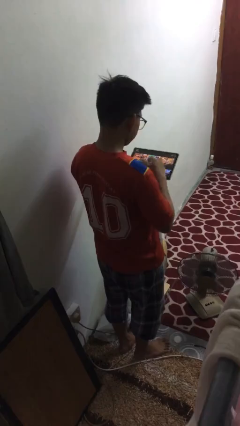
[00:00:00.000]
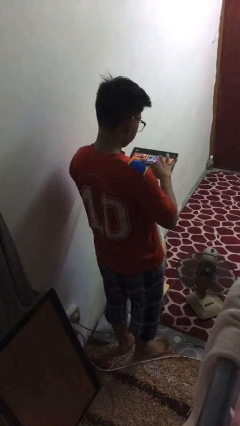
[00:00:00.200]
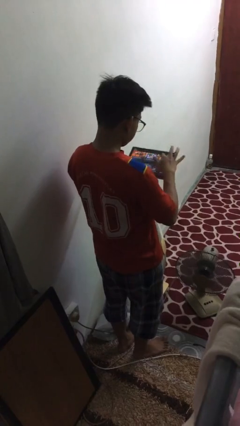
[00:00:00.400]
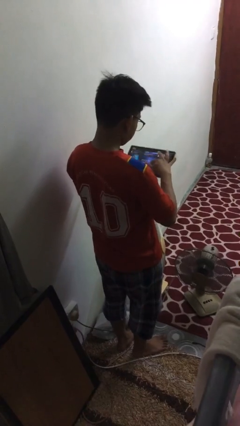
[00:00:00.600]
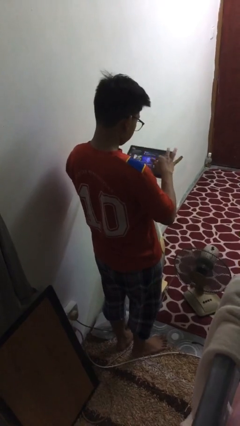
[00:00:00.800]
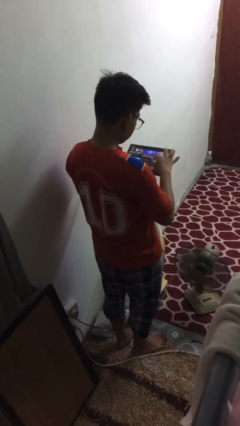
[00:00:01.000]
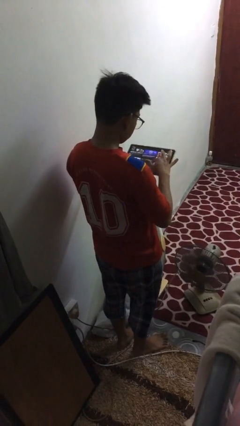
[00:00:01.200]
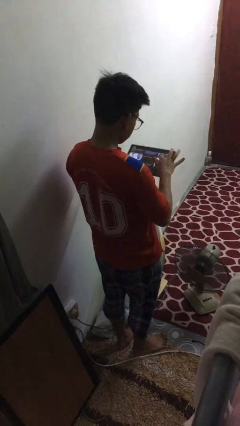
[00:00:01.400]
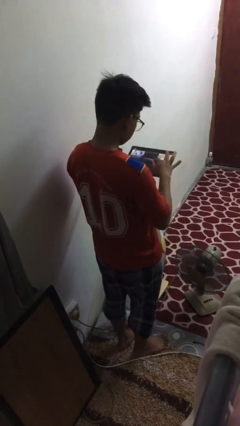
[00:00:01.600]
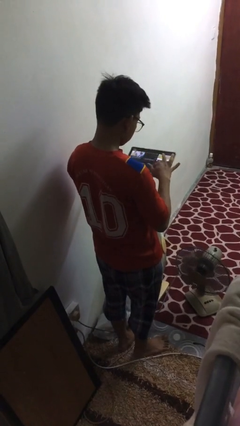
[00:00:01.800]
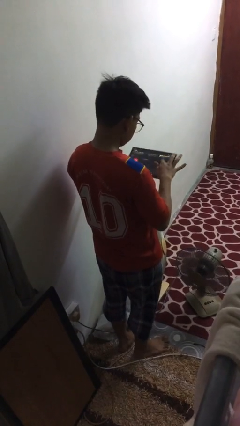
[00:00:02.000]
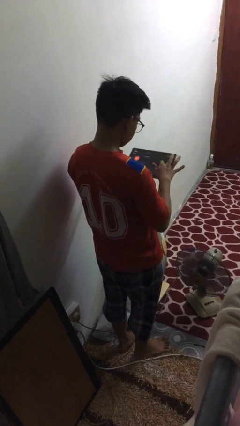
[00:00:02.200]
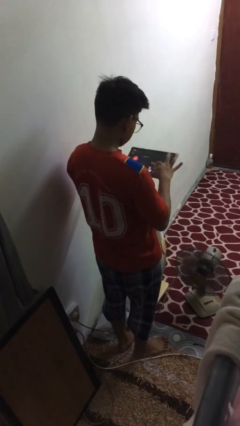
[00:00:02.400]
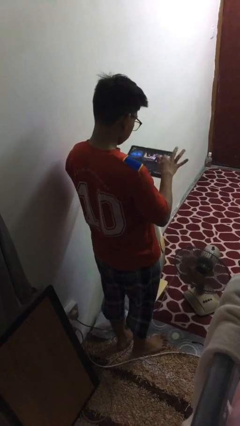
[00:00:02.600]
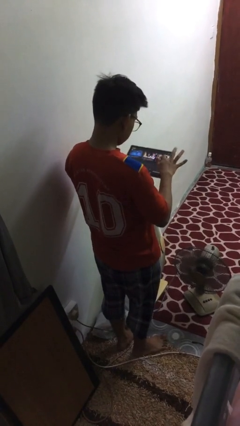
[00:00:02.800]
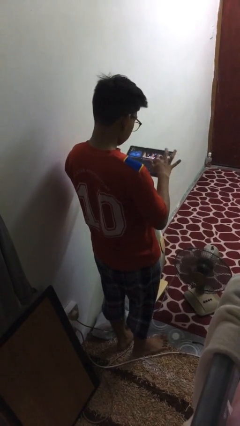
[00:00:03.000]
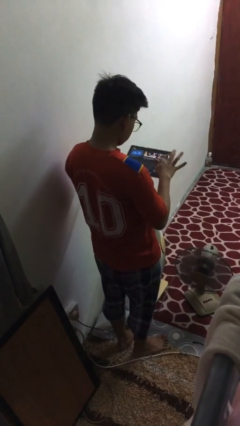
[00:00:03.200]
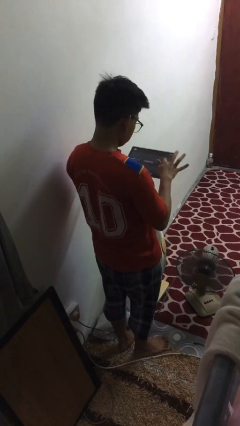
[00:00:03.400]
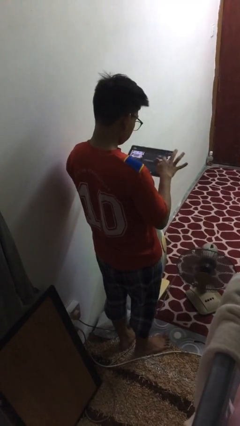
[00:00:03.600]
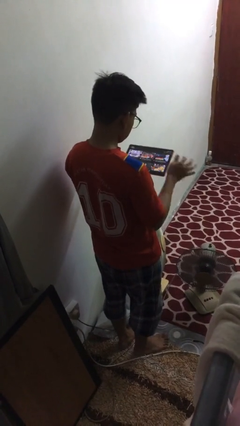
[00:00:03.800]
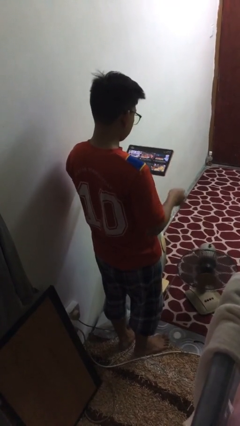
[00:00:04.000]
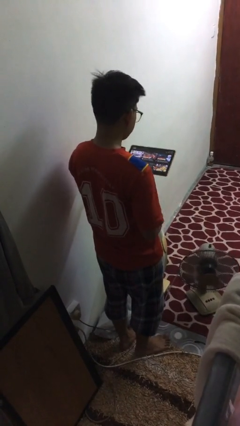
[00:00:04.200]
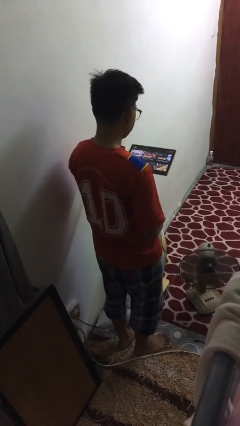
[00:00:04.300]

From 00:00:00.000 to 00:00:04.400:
person interacts with tablet

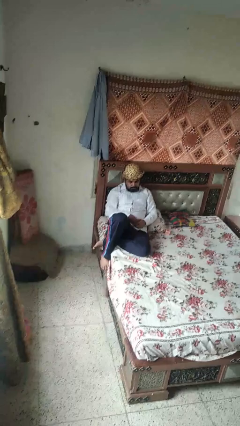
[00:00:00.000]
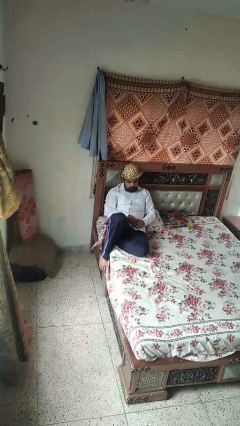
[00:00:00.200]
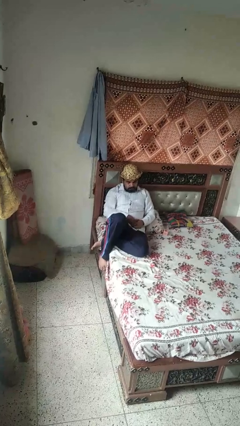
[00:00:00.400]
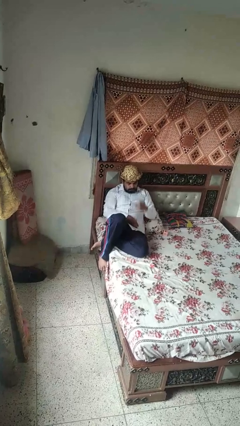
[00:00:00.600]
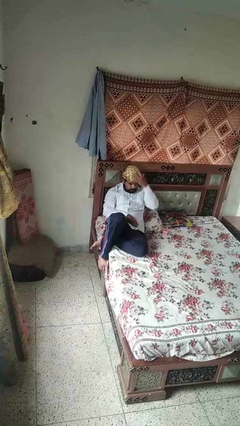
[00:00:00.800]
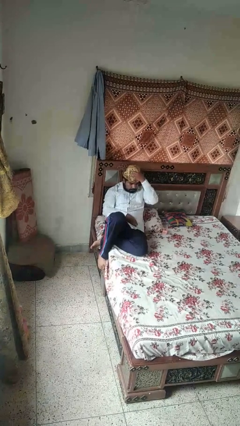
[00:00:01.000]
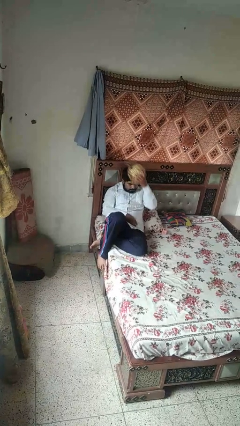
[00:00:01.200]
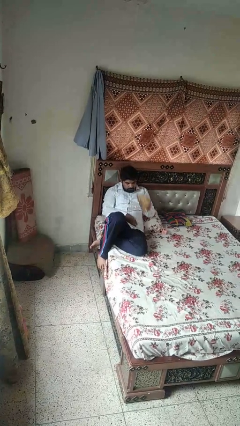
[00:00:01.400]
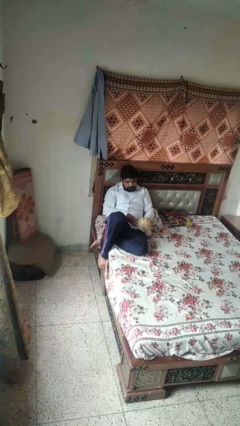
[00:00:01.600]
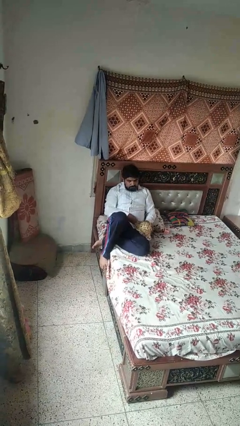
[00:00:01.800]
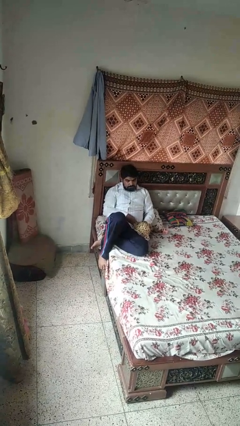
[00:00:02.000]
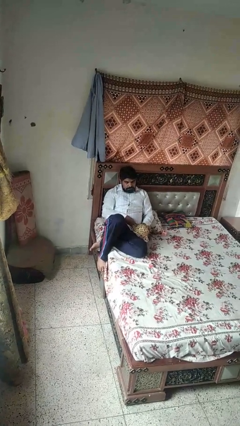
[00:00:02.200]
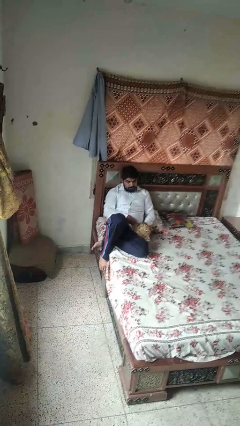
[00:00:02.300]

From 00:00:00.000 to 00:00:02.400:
person takes off hat

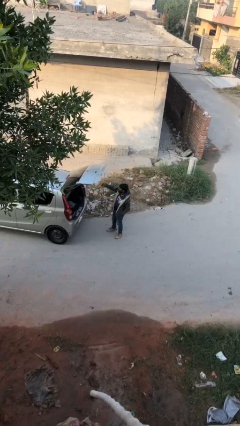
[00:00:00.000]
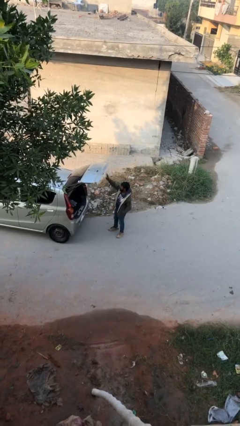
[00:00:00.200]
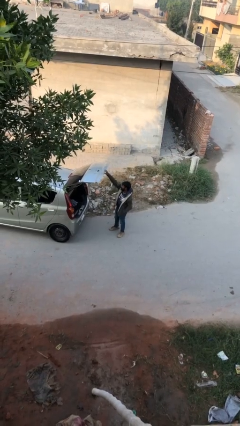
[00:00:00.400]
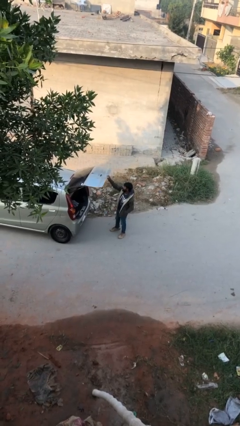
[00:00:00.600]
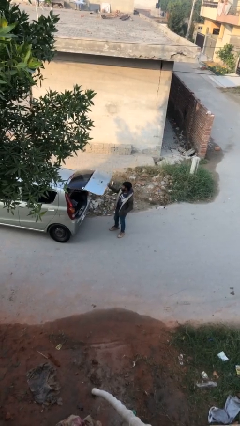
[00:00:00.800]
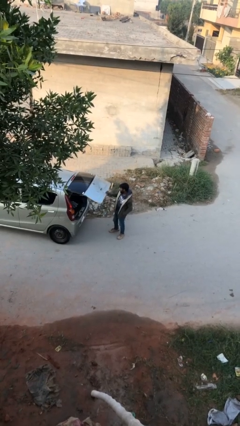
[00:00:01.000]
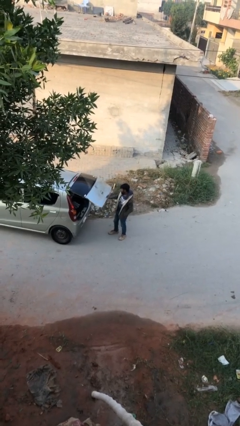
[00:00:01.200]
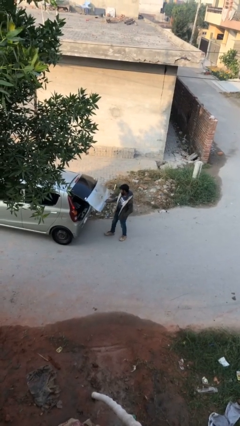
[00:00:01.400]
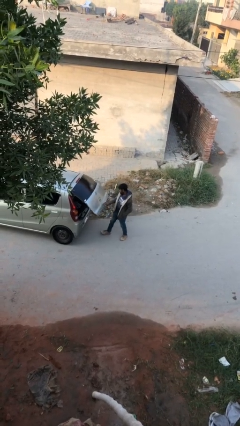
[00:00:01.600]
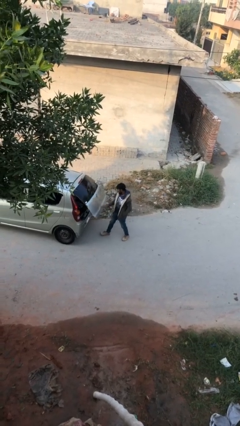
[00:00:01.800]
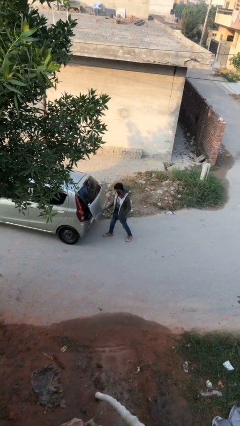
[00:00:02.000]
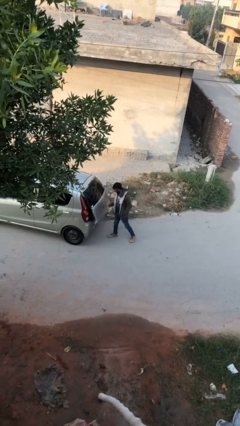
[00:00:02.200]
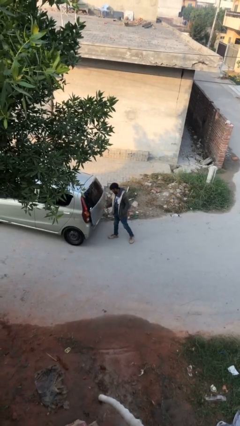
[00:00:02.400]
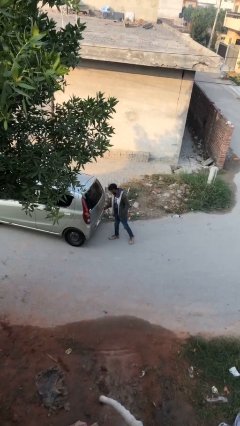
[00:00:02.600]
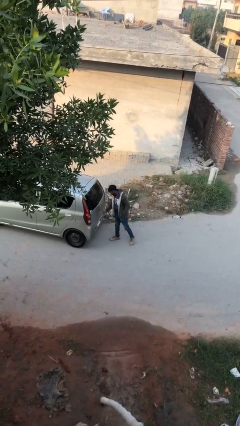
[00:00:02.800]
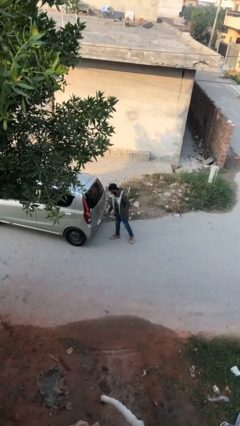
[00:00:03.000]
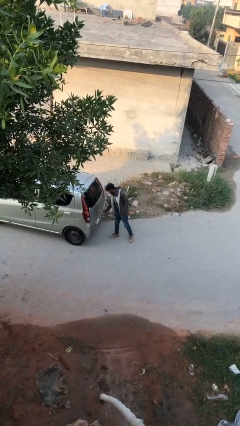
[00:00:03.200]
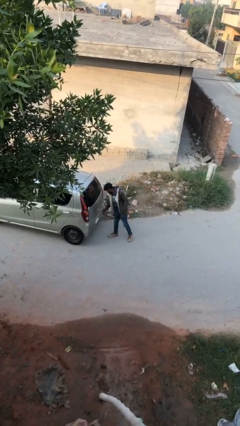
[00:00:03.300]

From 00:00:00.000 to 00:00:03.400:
person closes car trunk

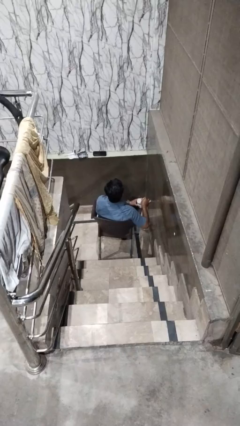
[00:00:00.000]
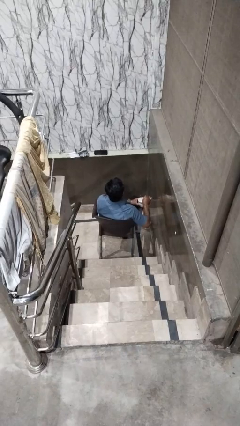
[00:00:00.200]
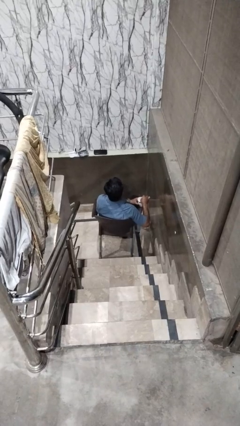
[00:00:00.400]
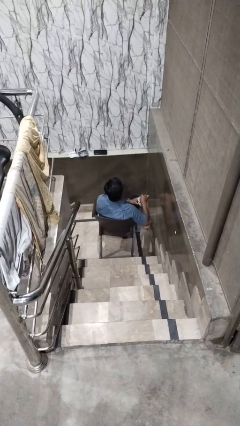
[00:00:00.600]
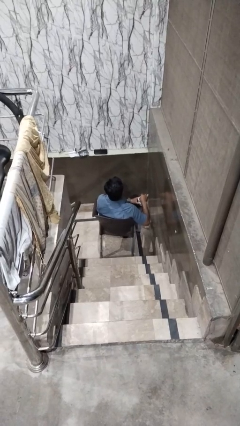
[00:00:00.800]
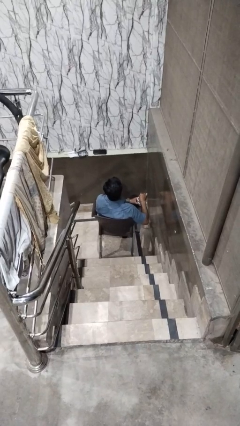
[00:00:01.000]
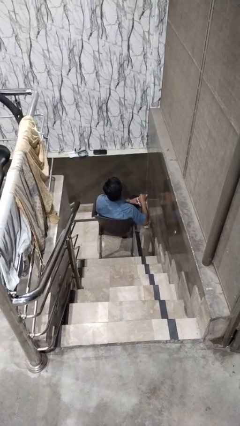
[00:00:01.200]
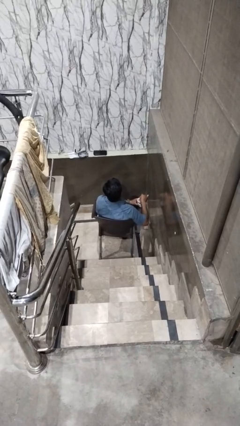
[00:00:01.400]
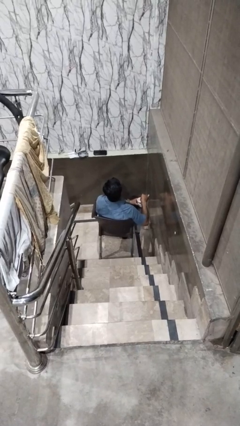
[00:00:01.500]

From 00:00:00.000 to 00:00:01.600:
person stirs mug

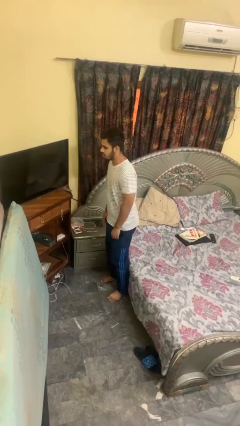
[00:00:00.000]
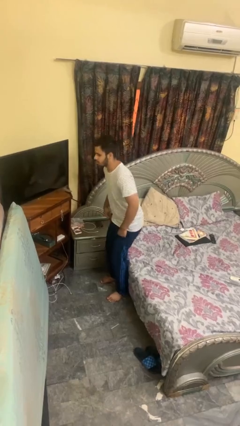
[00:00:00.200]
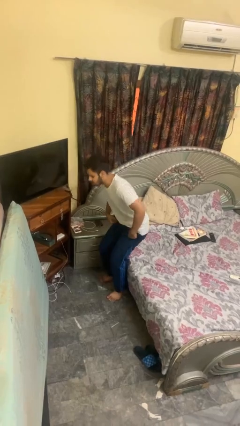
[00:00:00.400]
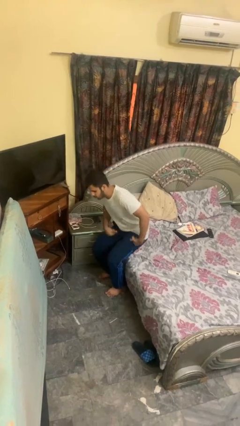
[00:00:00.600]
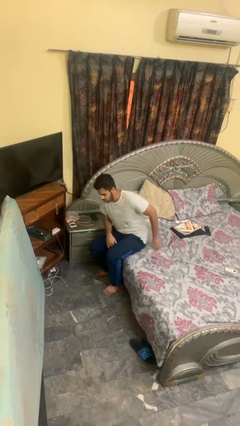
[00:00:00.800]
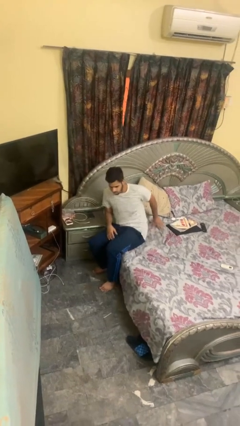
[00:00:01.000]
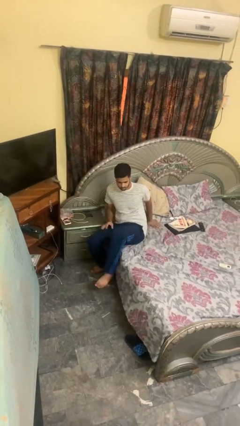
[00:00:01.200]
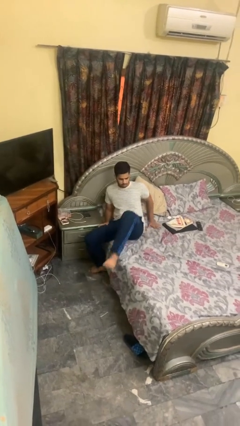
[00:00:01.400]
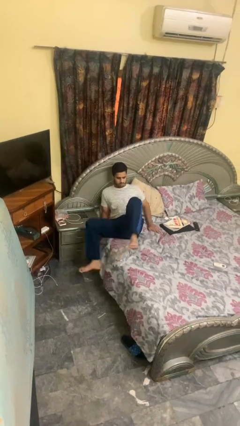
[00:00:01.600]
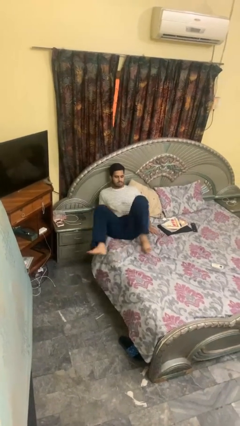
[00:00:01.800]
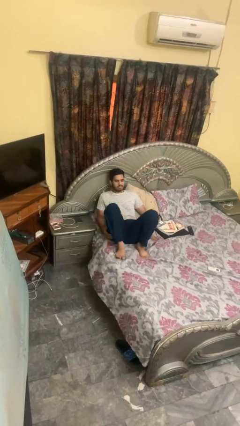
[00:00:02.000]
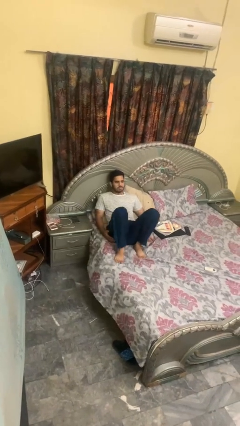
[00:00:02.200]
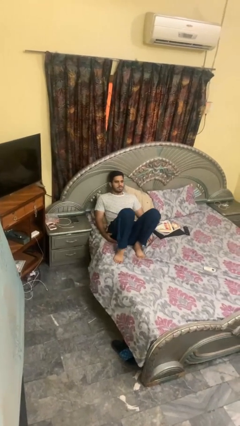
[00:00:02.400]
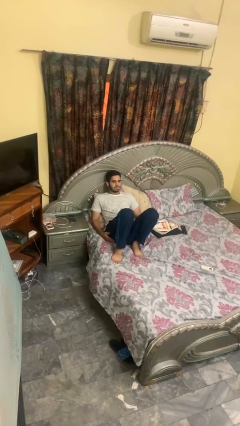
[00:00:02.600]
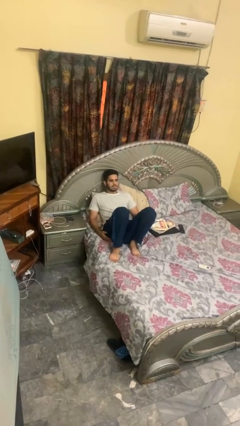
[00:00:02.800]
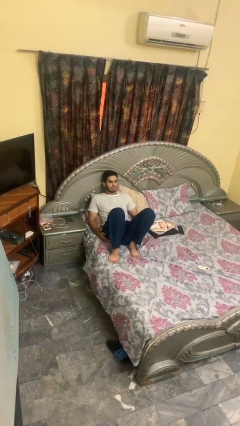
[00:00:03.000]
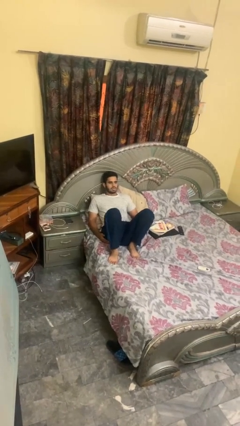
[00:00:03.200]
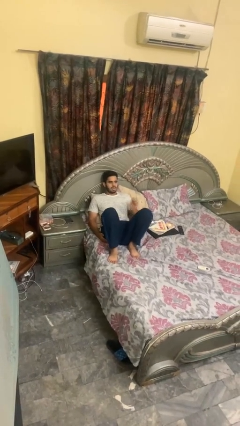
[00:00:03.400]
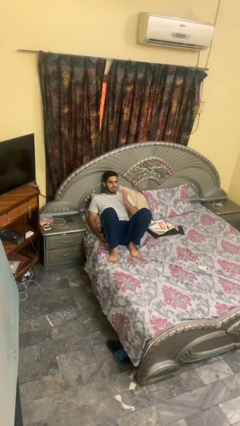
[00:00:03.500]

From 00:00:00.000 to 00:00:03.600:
person lies down on bed

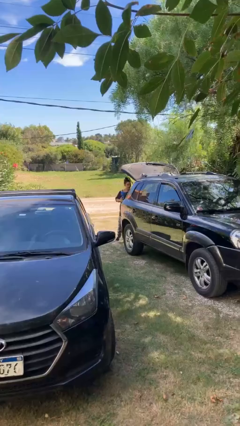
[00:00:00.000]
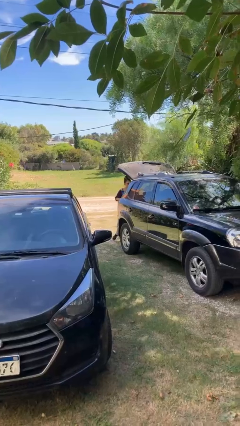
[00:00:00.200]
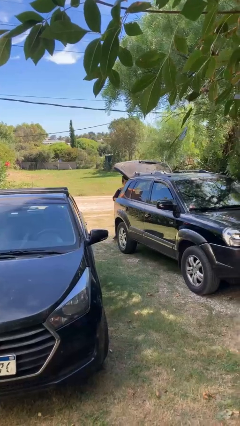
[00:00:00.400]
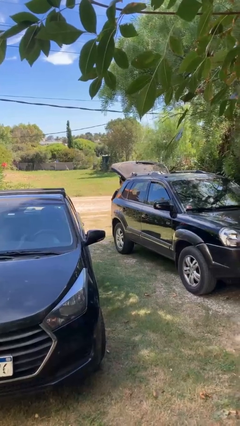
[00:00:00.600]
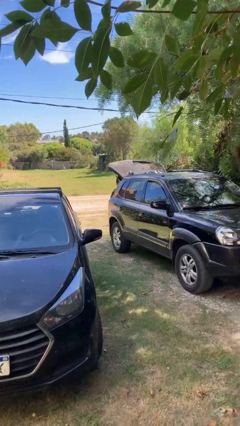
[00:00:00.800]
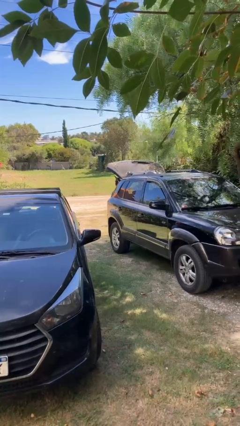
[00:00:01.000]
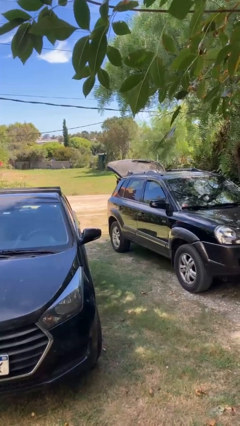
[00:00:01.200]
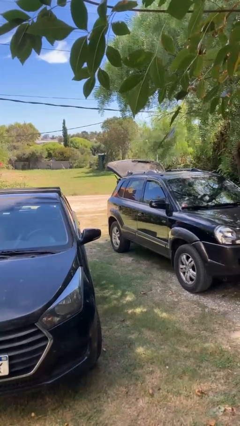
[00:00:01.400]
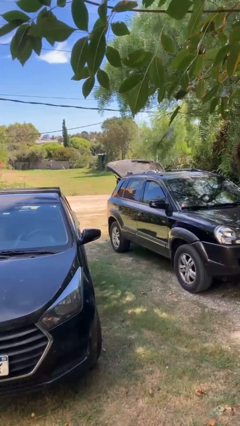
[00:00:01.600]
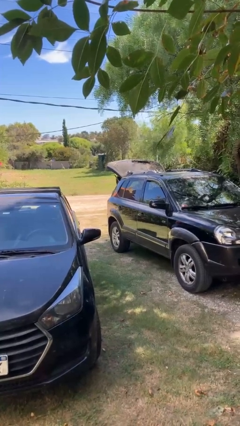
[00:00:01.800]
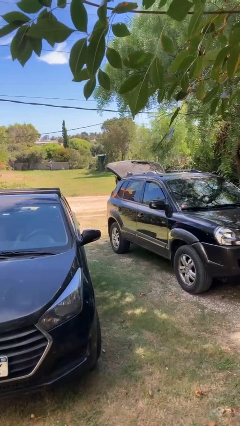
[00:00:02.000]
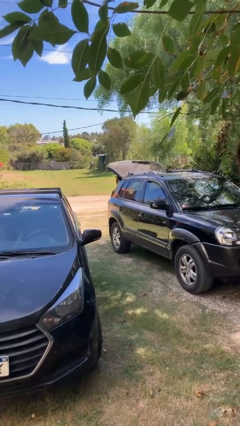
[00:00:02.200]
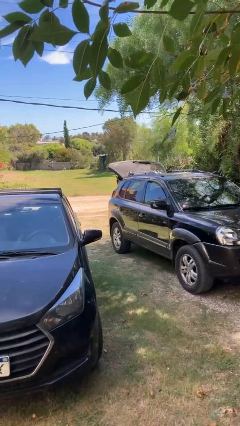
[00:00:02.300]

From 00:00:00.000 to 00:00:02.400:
person loads car
